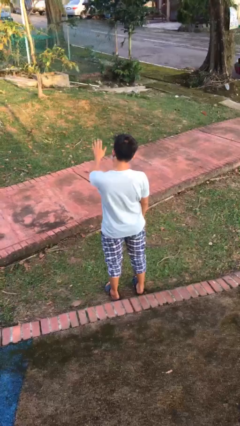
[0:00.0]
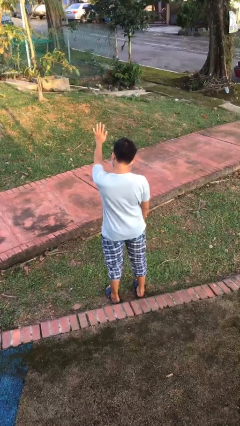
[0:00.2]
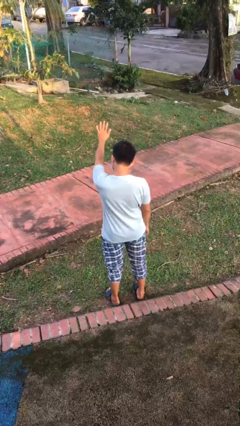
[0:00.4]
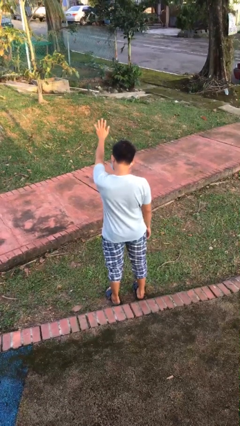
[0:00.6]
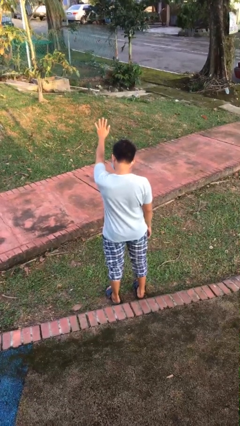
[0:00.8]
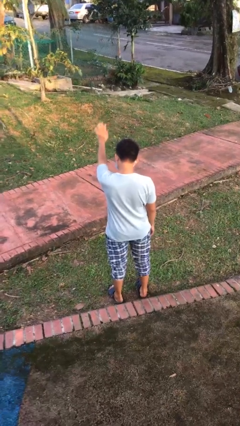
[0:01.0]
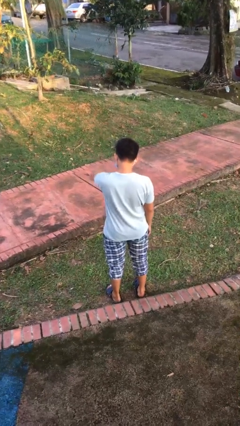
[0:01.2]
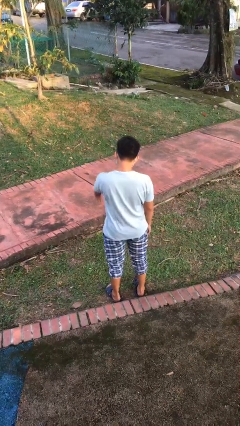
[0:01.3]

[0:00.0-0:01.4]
person gestures stop

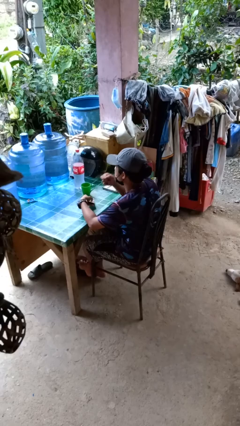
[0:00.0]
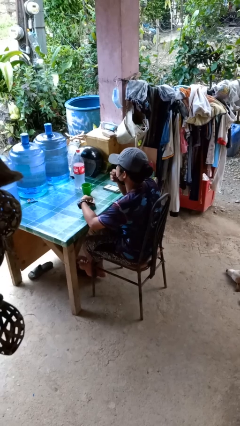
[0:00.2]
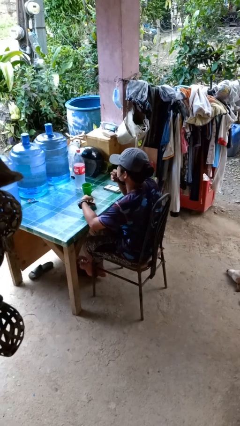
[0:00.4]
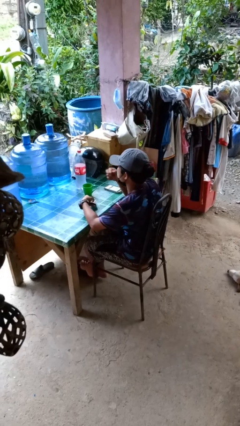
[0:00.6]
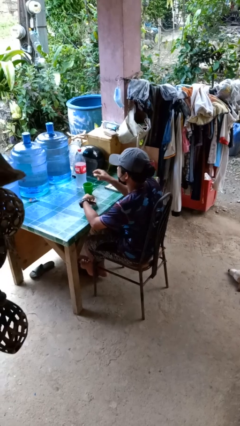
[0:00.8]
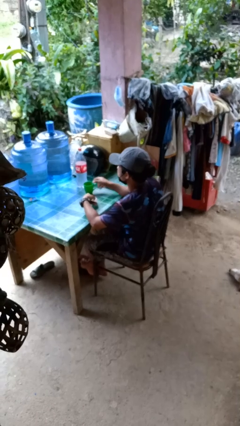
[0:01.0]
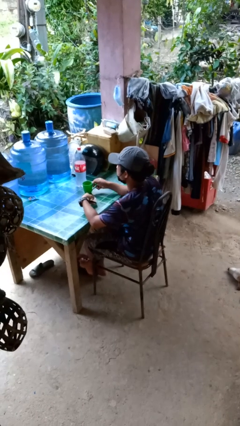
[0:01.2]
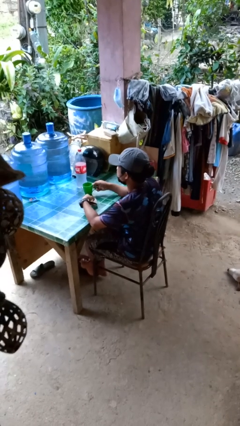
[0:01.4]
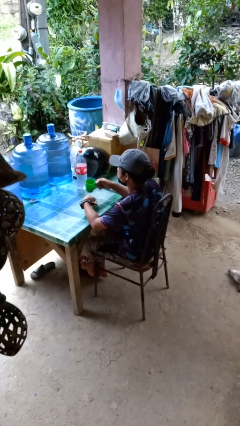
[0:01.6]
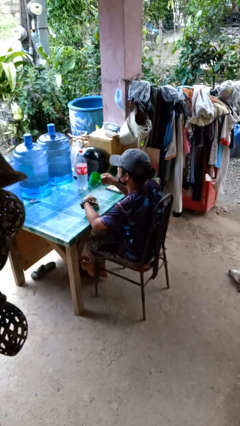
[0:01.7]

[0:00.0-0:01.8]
person takes medicine pills

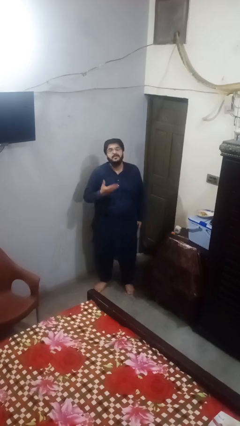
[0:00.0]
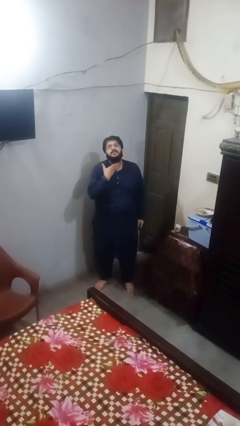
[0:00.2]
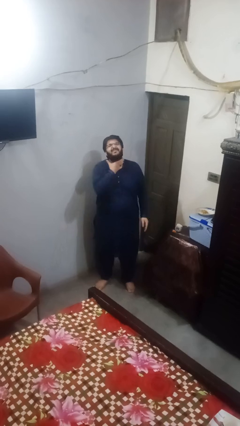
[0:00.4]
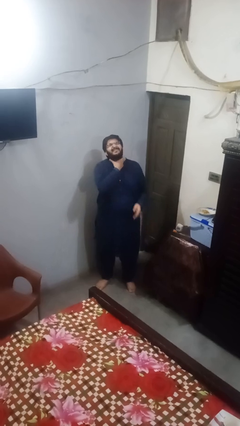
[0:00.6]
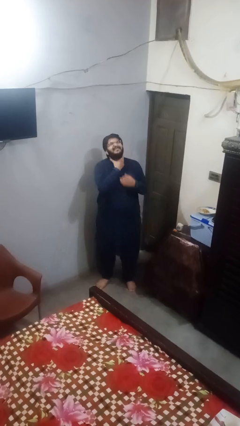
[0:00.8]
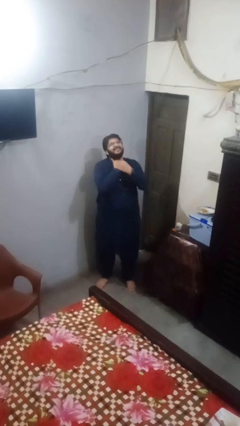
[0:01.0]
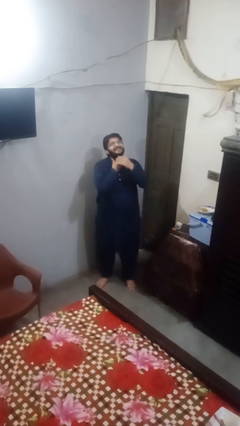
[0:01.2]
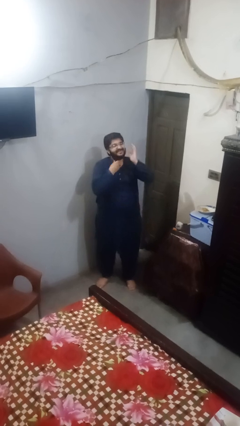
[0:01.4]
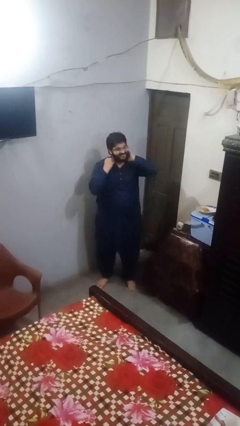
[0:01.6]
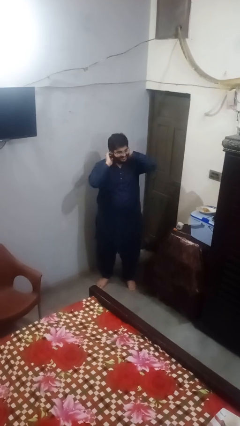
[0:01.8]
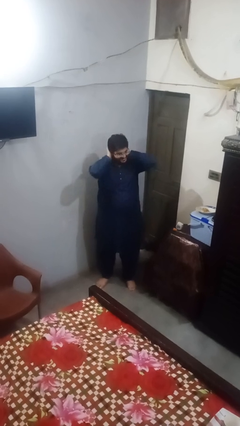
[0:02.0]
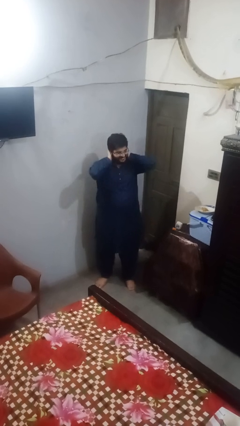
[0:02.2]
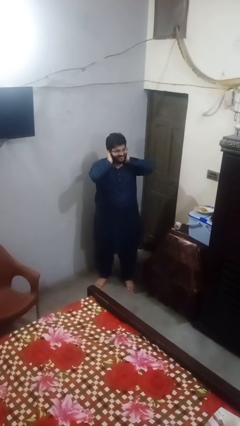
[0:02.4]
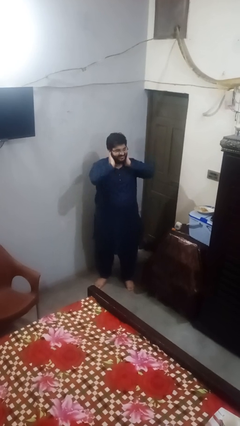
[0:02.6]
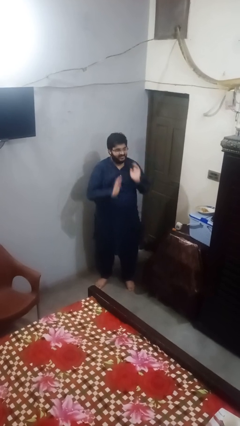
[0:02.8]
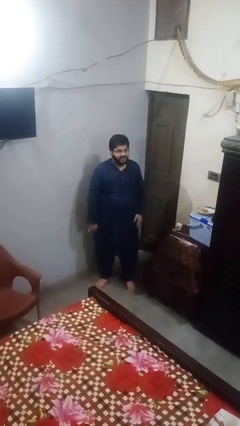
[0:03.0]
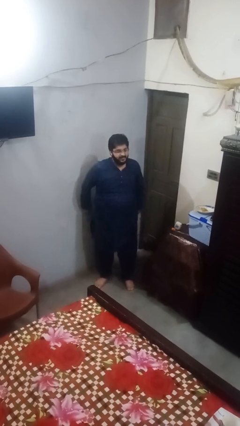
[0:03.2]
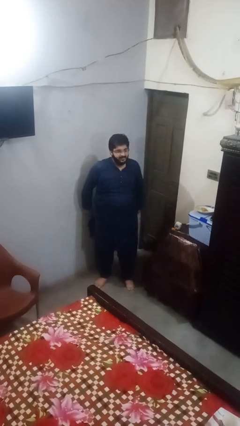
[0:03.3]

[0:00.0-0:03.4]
person rubs neck

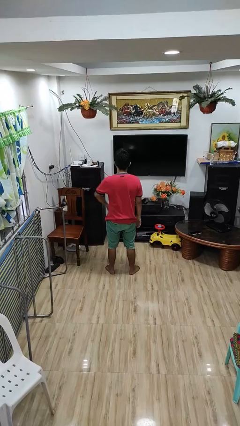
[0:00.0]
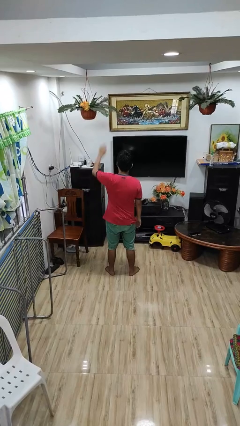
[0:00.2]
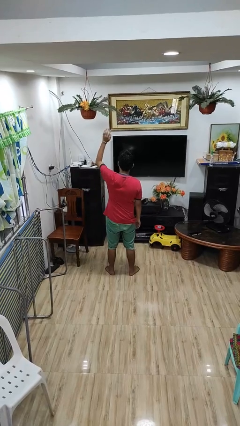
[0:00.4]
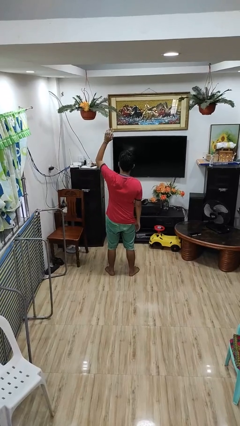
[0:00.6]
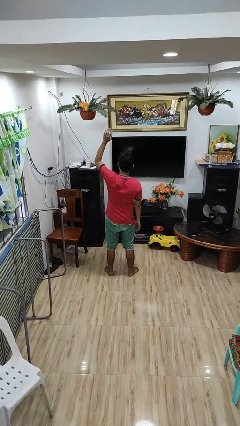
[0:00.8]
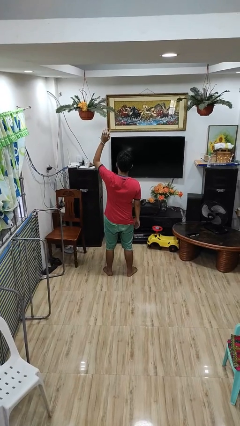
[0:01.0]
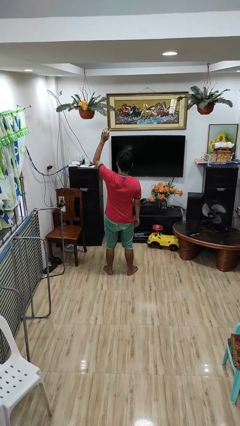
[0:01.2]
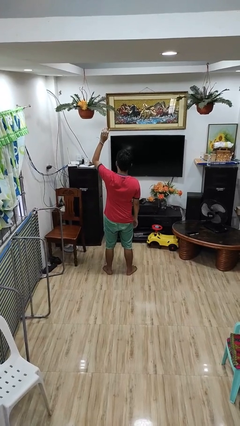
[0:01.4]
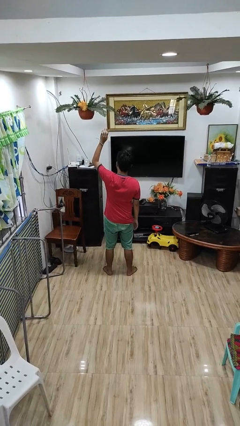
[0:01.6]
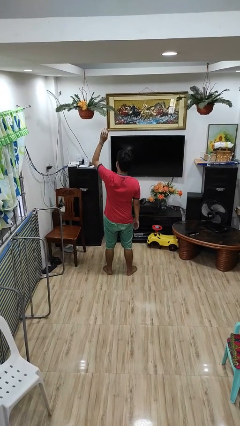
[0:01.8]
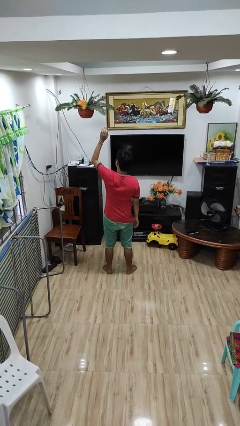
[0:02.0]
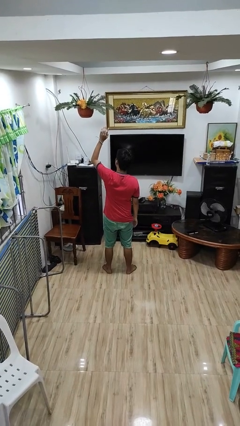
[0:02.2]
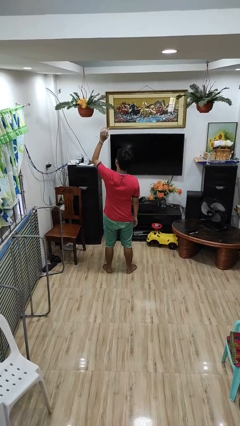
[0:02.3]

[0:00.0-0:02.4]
person gestures swipe up

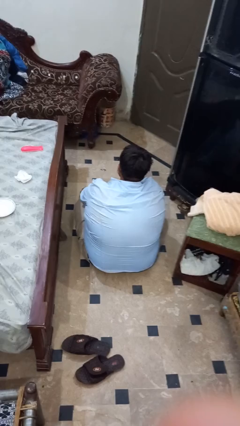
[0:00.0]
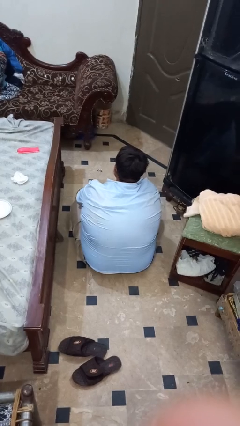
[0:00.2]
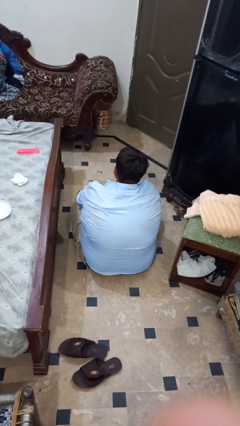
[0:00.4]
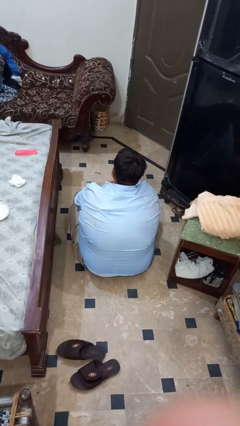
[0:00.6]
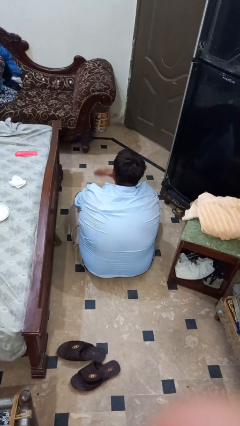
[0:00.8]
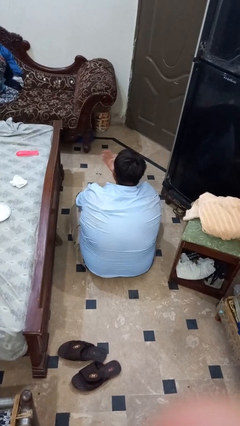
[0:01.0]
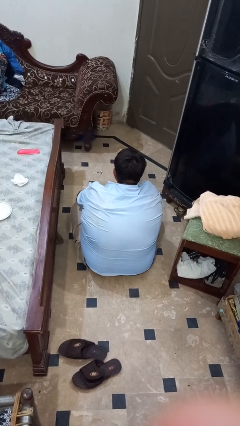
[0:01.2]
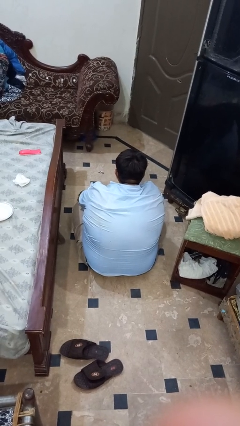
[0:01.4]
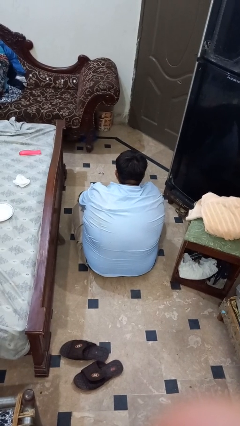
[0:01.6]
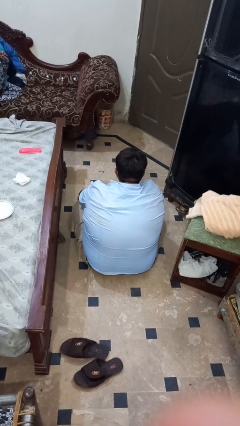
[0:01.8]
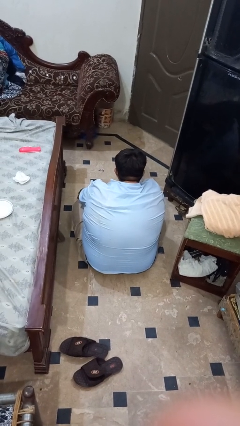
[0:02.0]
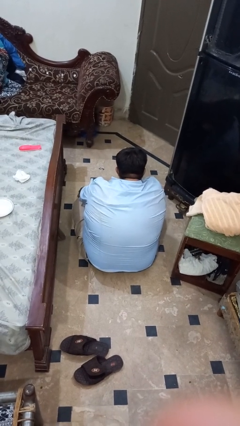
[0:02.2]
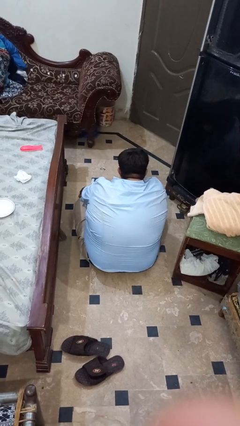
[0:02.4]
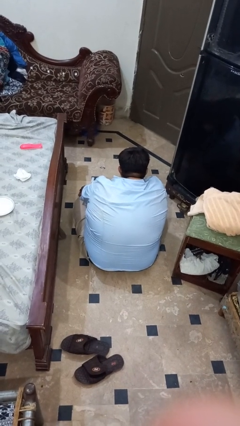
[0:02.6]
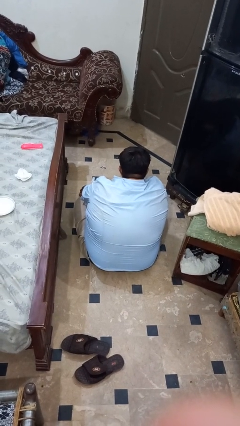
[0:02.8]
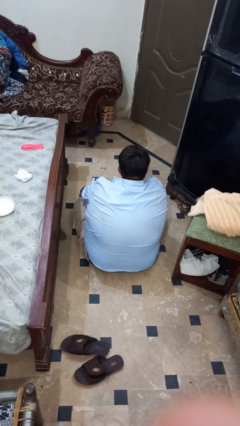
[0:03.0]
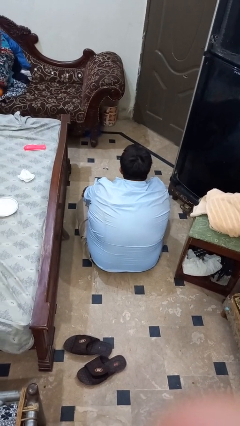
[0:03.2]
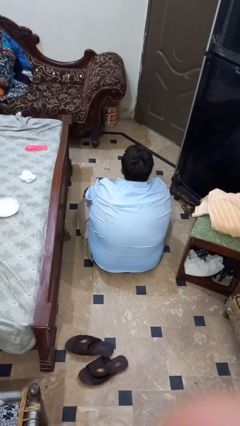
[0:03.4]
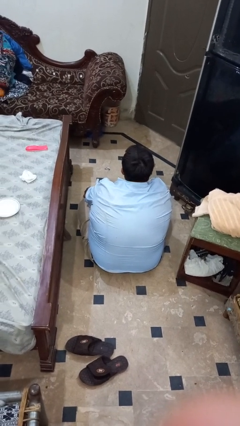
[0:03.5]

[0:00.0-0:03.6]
person gestures blow kiss

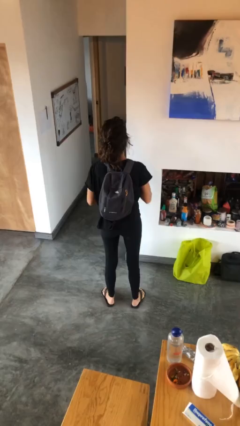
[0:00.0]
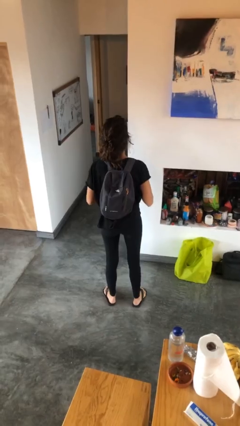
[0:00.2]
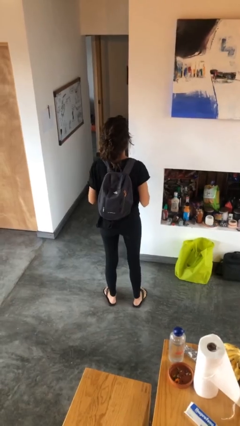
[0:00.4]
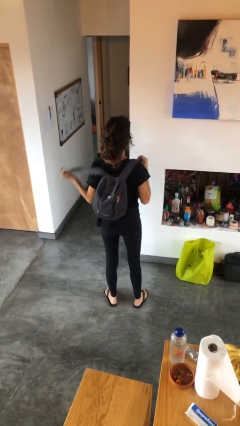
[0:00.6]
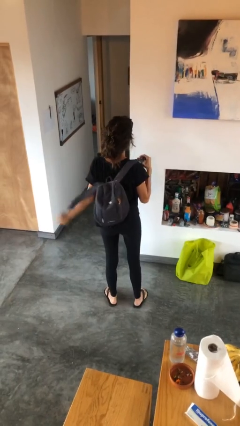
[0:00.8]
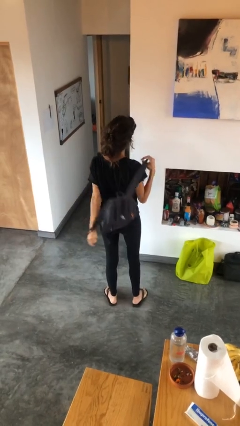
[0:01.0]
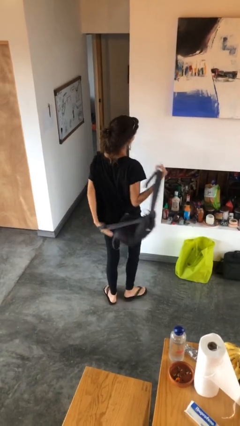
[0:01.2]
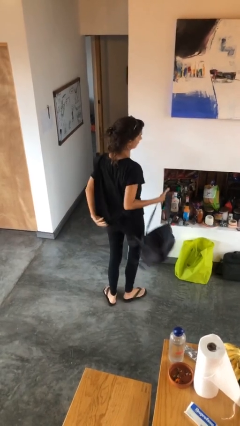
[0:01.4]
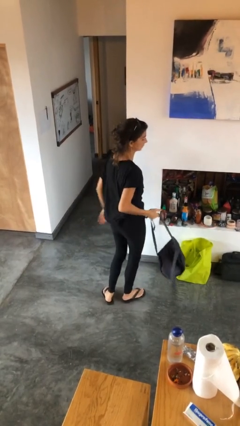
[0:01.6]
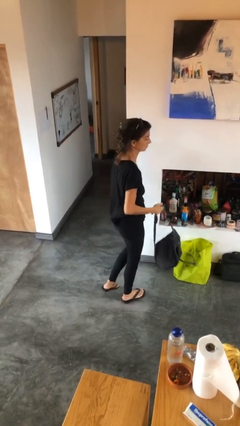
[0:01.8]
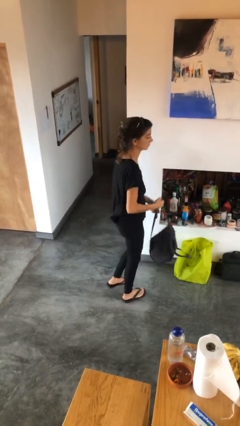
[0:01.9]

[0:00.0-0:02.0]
person takes off backpack

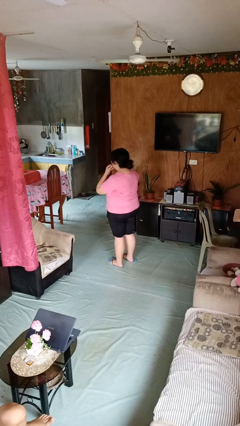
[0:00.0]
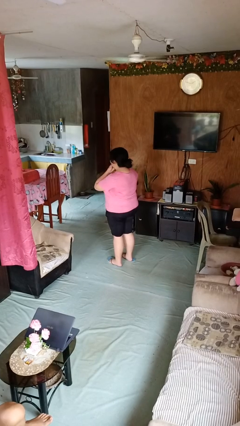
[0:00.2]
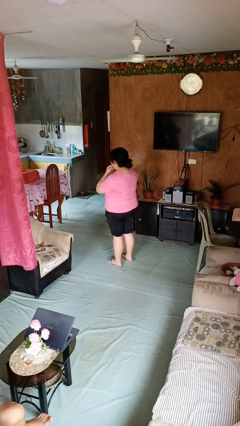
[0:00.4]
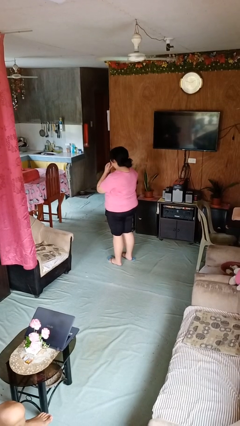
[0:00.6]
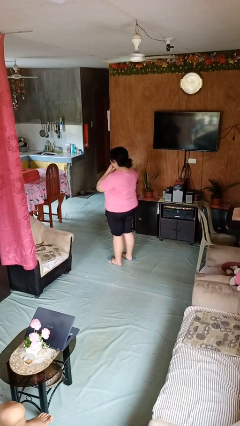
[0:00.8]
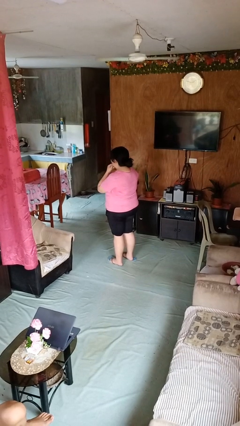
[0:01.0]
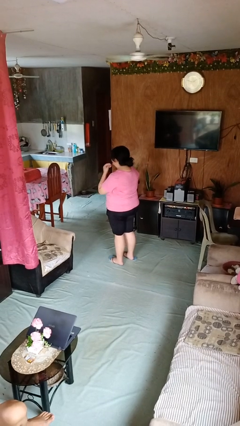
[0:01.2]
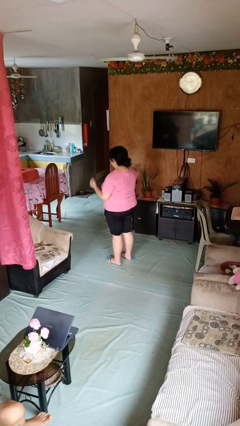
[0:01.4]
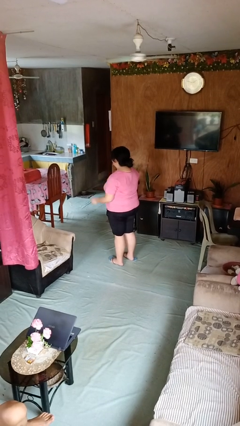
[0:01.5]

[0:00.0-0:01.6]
person strokes chin

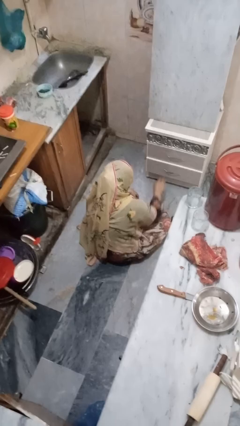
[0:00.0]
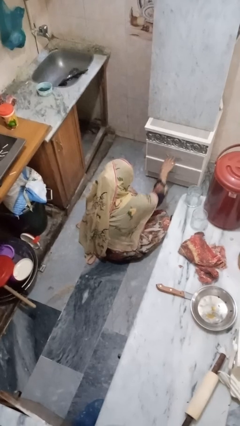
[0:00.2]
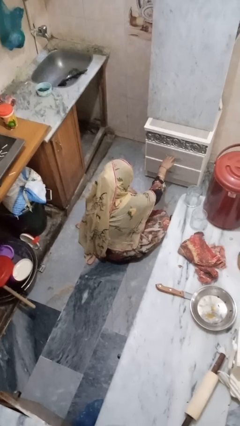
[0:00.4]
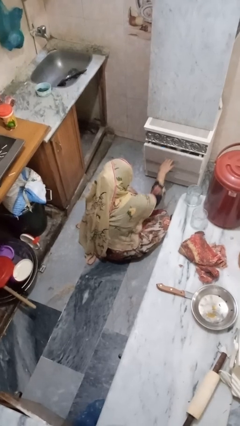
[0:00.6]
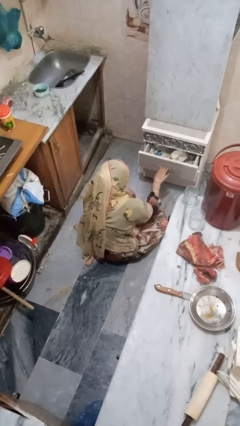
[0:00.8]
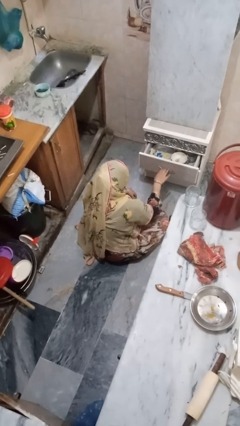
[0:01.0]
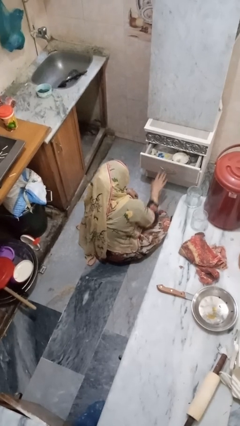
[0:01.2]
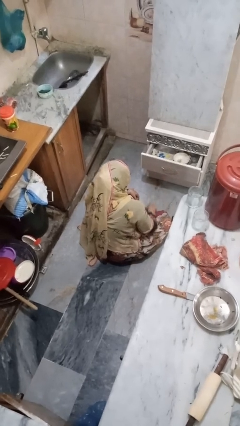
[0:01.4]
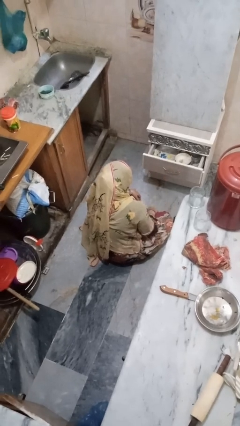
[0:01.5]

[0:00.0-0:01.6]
person opens kitchen drawer
